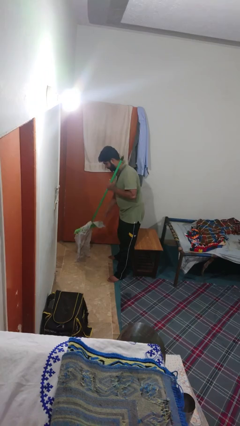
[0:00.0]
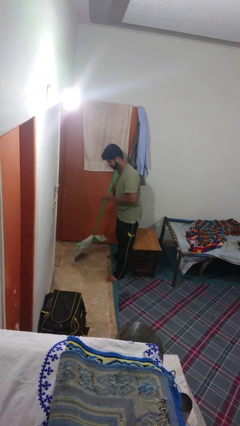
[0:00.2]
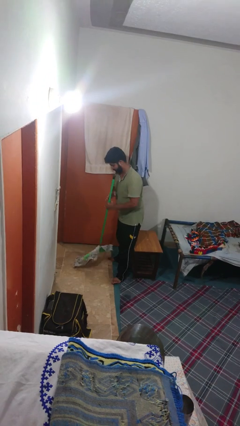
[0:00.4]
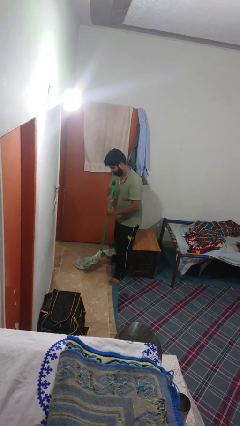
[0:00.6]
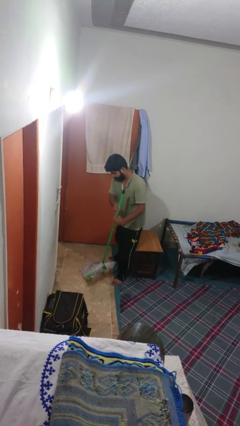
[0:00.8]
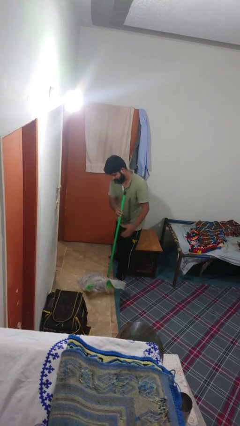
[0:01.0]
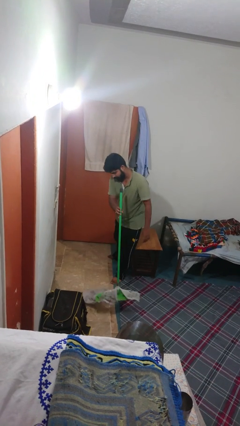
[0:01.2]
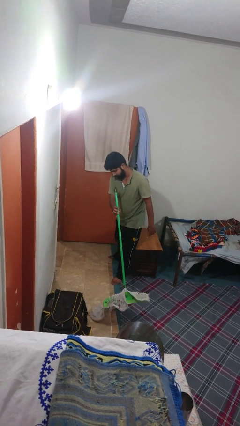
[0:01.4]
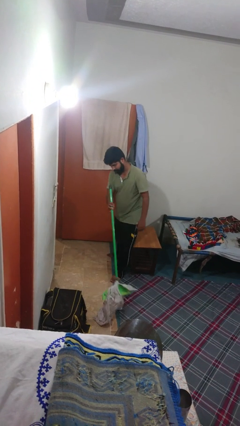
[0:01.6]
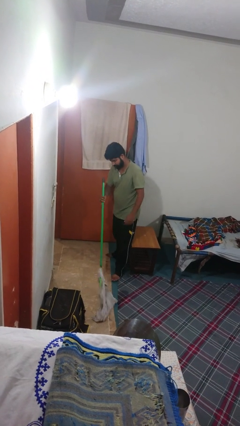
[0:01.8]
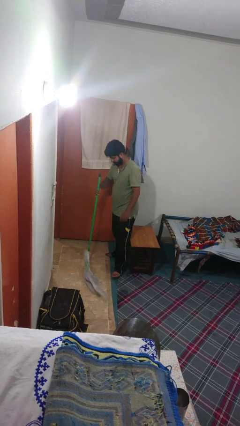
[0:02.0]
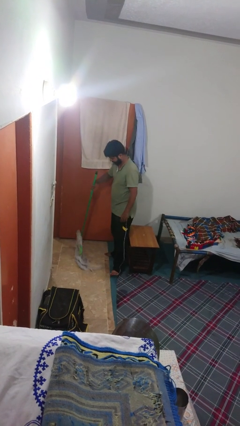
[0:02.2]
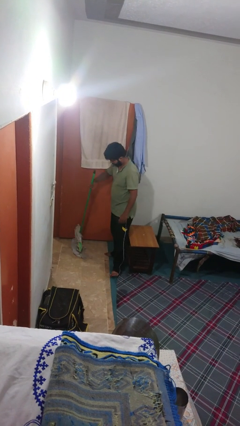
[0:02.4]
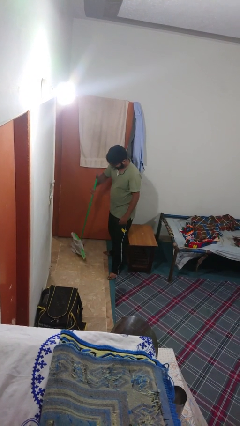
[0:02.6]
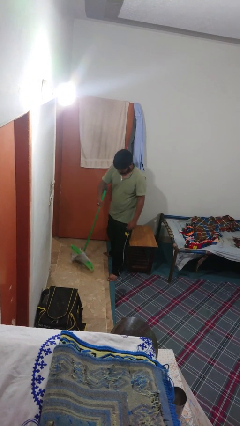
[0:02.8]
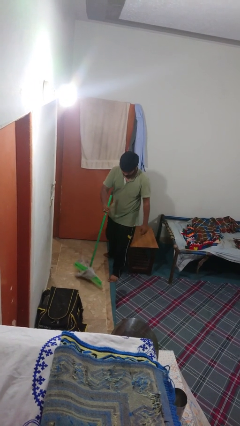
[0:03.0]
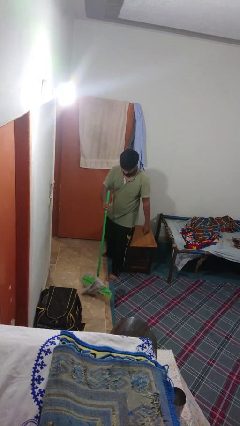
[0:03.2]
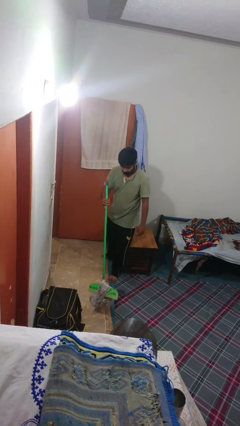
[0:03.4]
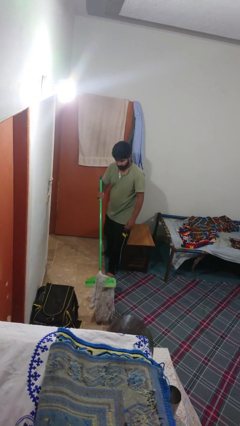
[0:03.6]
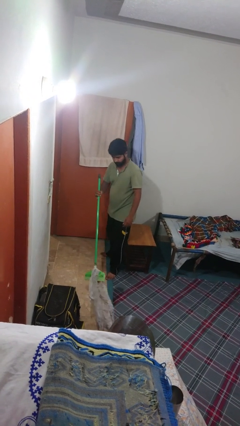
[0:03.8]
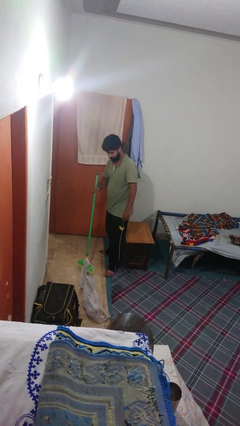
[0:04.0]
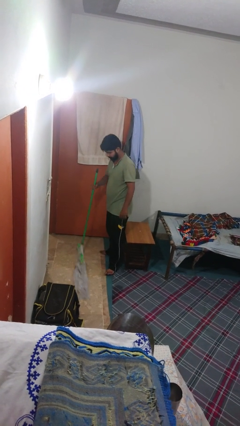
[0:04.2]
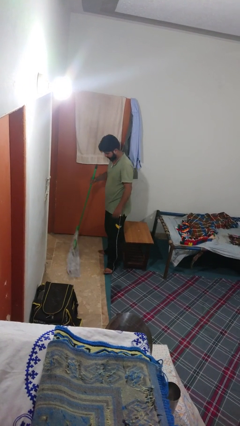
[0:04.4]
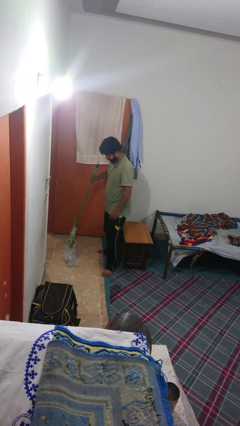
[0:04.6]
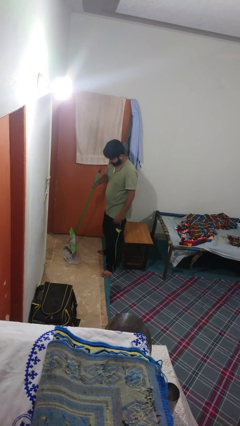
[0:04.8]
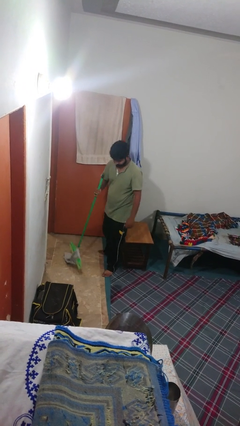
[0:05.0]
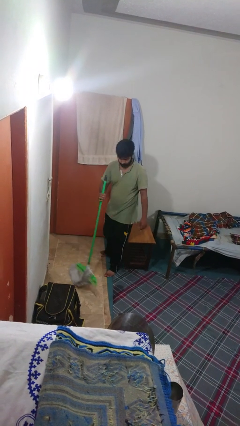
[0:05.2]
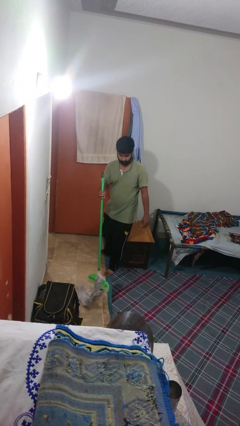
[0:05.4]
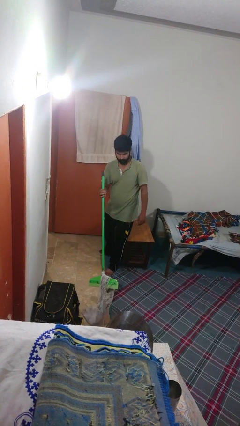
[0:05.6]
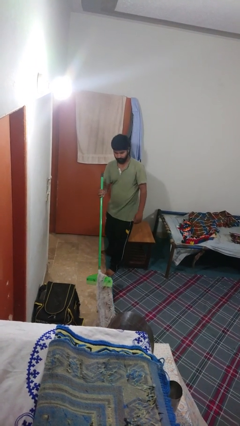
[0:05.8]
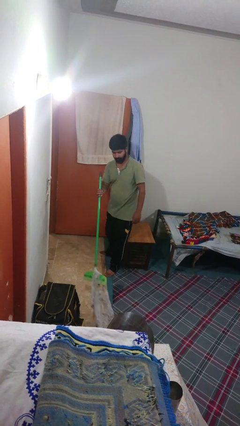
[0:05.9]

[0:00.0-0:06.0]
person mops

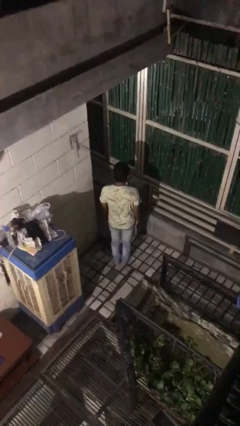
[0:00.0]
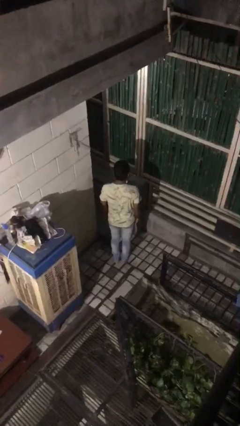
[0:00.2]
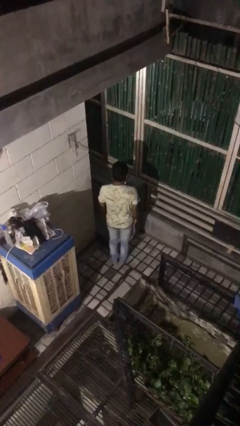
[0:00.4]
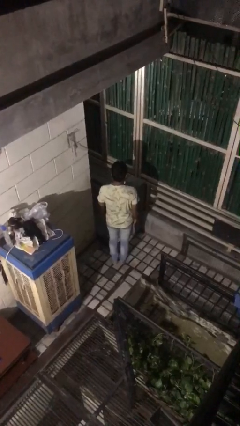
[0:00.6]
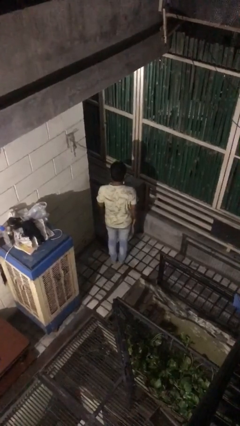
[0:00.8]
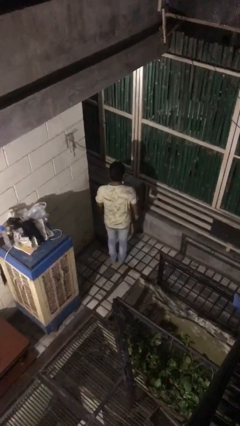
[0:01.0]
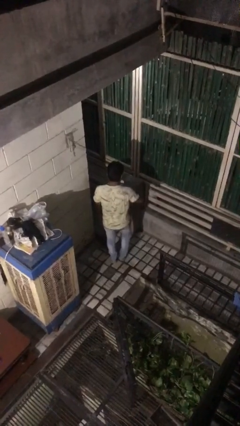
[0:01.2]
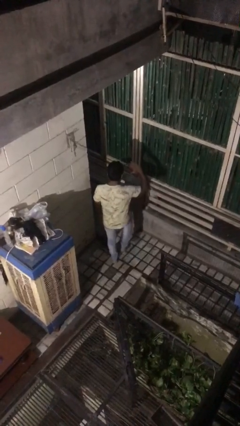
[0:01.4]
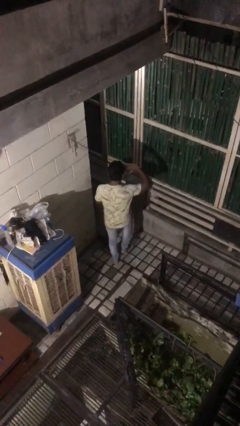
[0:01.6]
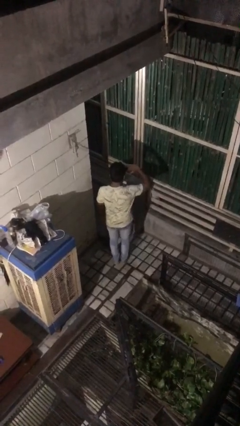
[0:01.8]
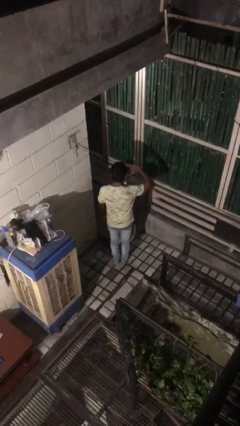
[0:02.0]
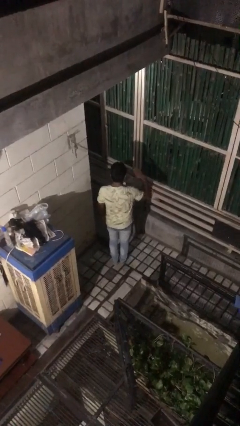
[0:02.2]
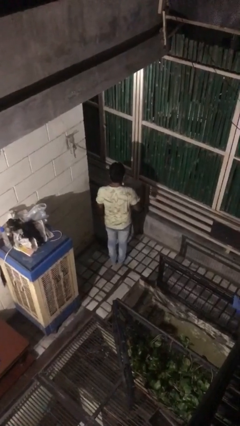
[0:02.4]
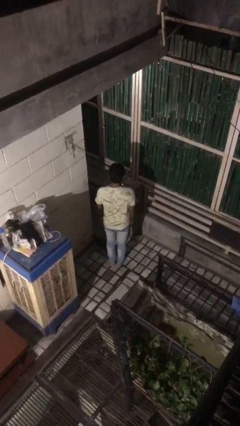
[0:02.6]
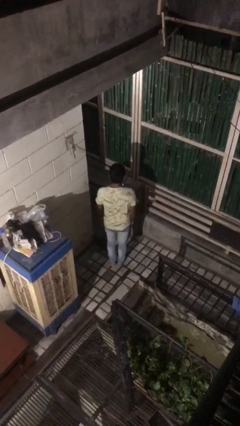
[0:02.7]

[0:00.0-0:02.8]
person salutes

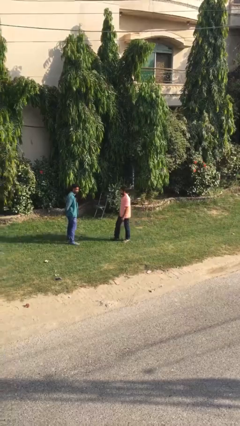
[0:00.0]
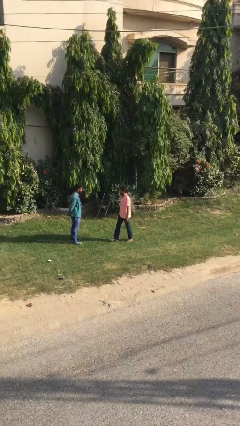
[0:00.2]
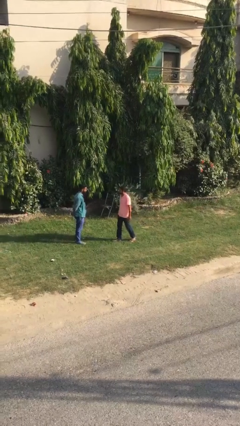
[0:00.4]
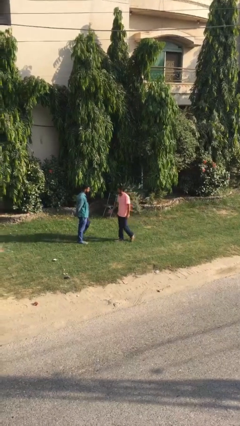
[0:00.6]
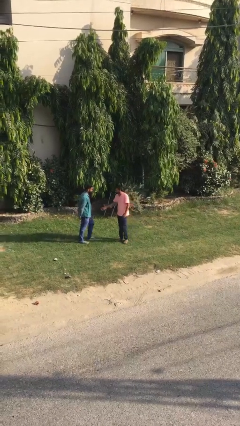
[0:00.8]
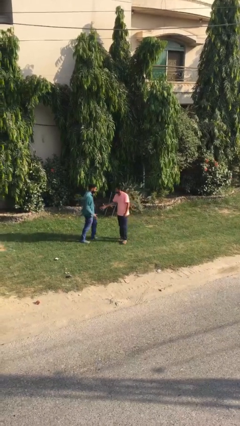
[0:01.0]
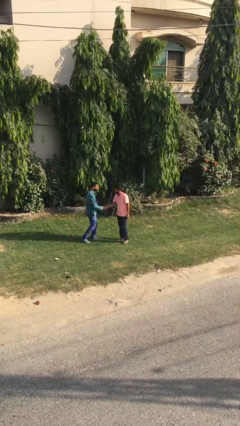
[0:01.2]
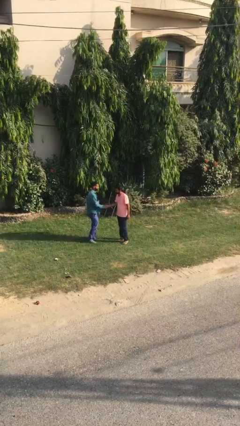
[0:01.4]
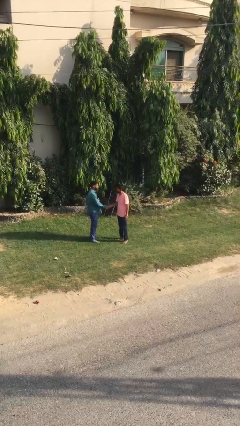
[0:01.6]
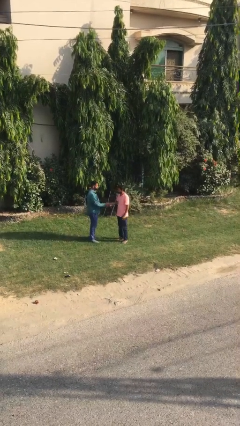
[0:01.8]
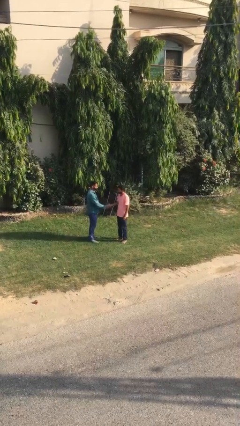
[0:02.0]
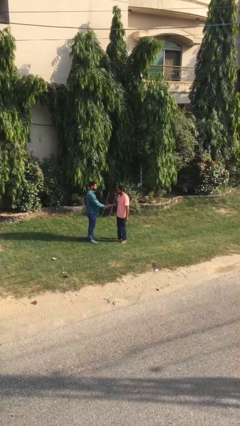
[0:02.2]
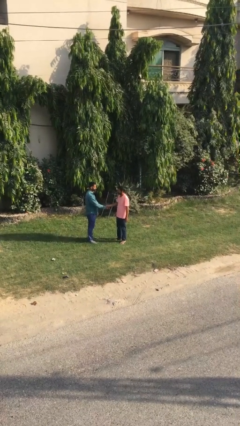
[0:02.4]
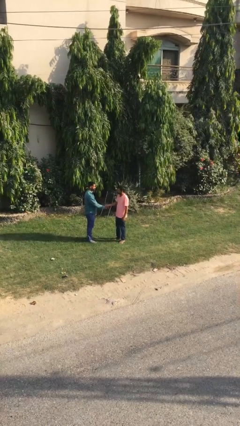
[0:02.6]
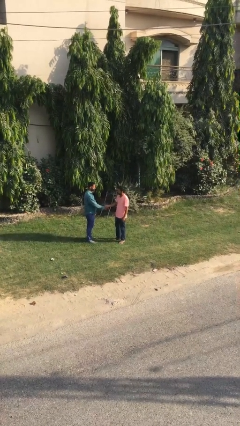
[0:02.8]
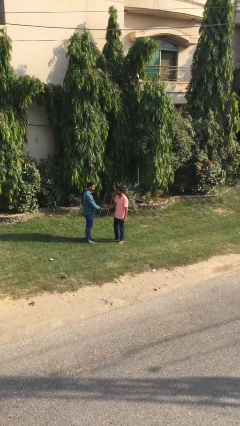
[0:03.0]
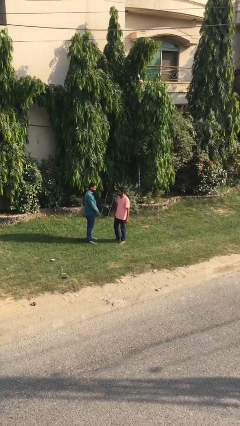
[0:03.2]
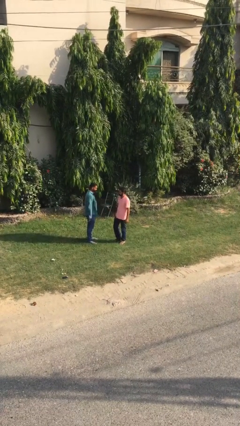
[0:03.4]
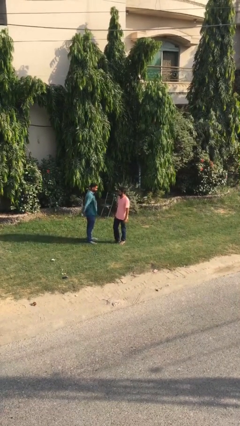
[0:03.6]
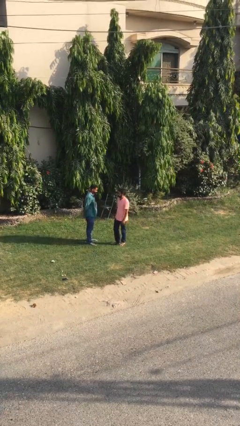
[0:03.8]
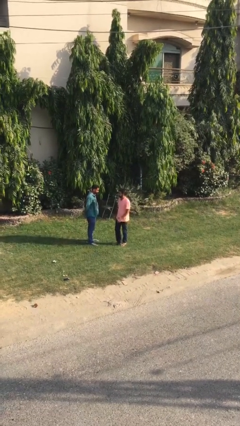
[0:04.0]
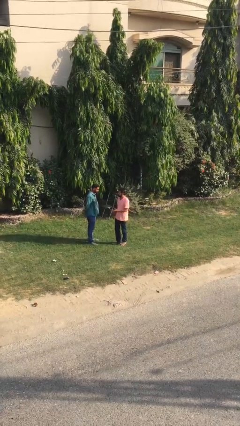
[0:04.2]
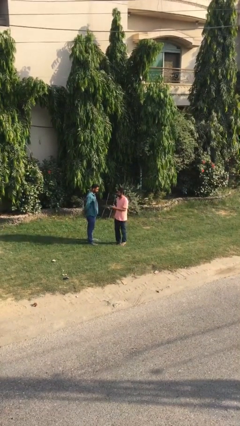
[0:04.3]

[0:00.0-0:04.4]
person shakes hand

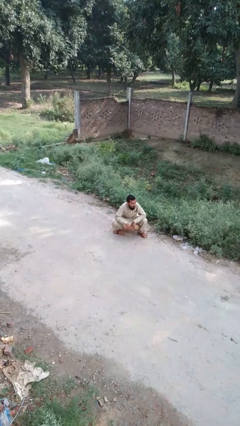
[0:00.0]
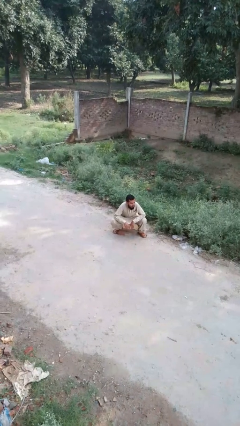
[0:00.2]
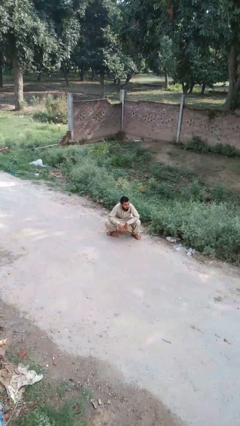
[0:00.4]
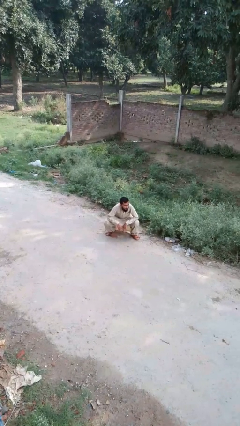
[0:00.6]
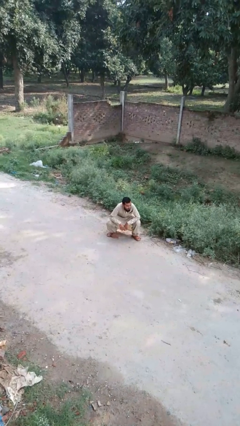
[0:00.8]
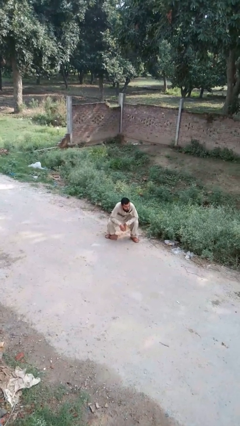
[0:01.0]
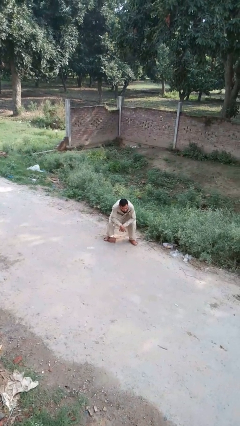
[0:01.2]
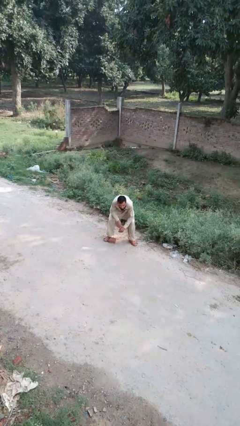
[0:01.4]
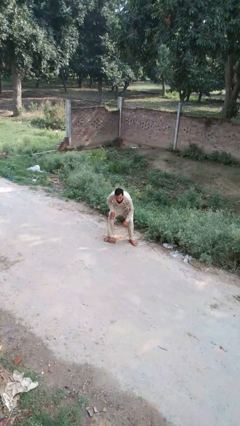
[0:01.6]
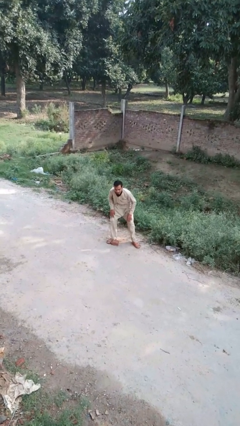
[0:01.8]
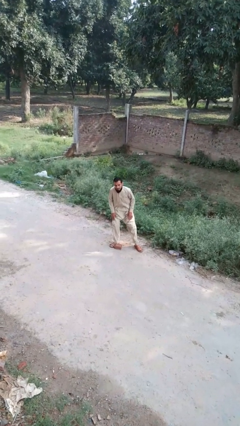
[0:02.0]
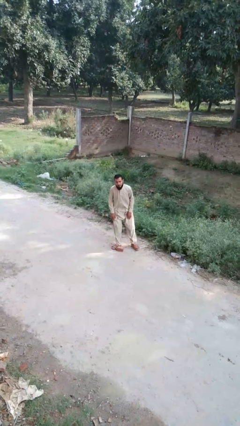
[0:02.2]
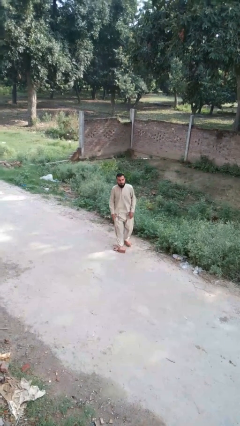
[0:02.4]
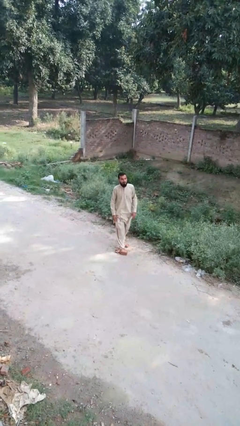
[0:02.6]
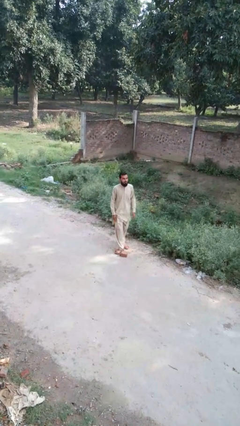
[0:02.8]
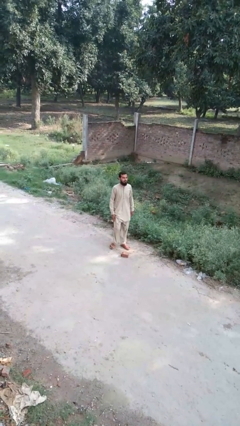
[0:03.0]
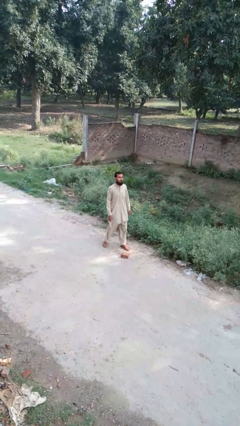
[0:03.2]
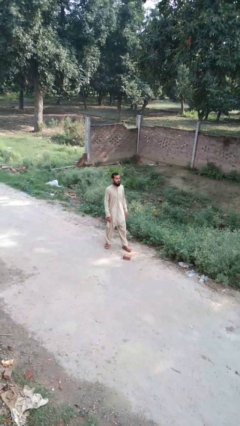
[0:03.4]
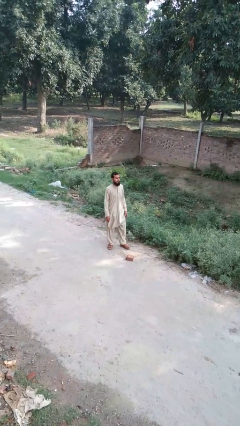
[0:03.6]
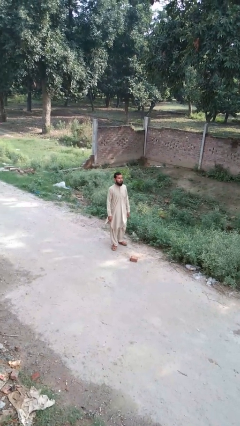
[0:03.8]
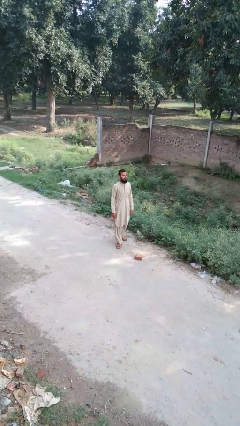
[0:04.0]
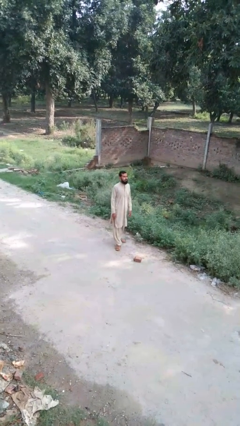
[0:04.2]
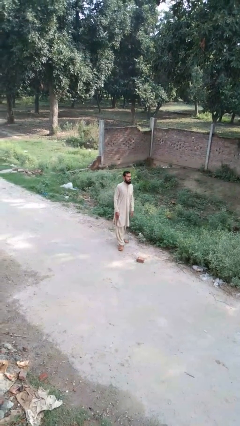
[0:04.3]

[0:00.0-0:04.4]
person stands up from floor

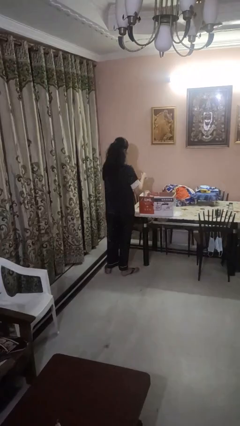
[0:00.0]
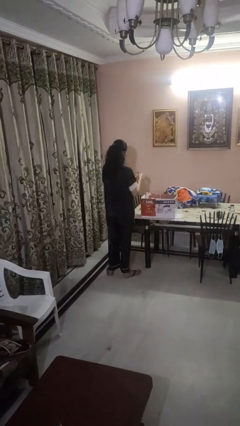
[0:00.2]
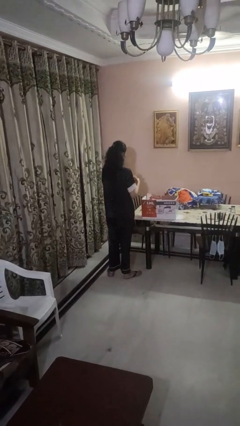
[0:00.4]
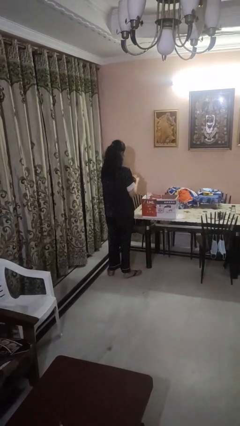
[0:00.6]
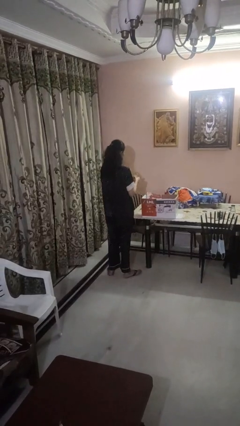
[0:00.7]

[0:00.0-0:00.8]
person takes object from box
